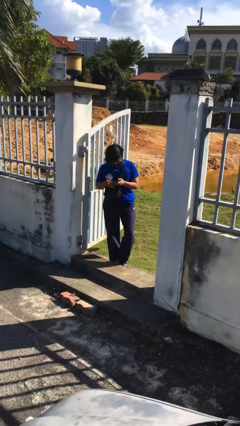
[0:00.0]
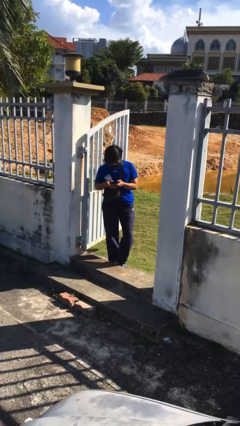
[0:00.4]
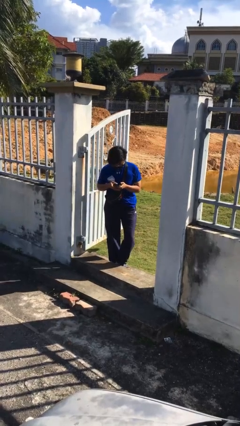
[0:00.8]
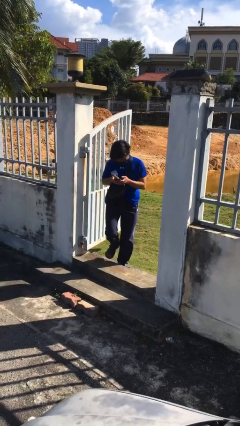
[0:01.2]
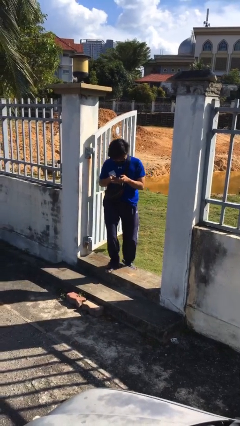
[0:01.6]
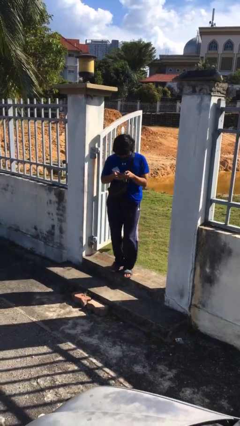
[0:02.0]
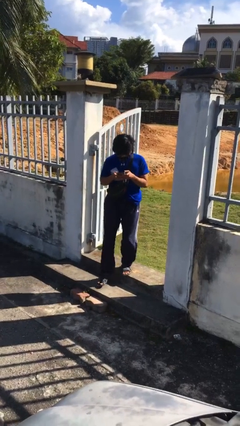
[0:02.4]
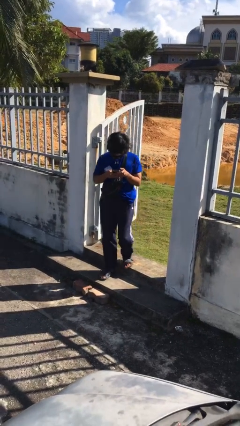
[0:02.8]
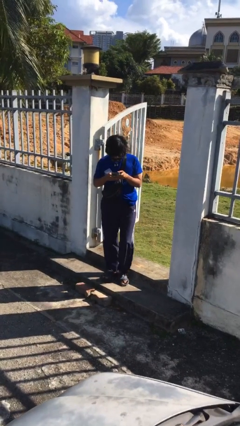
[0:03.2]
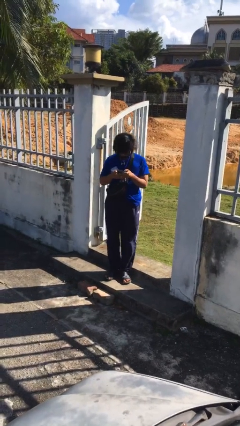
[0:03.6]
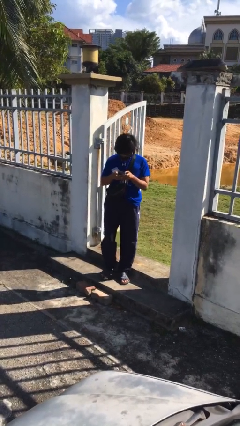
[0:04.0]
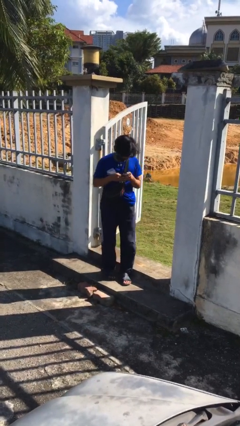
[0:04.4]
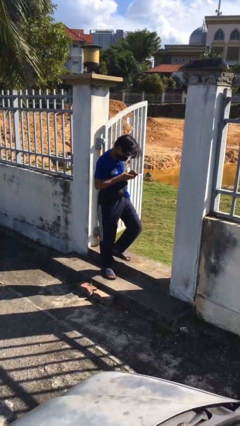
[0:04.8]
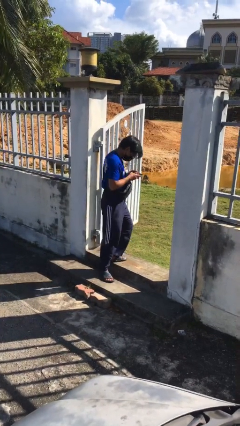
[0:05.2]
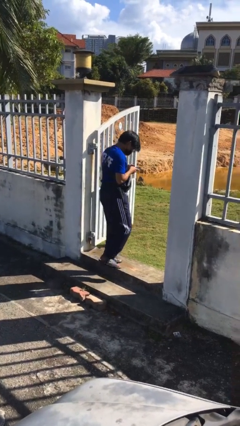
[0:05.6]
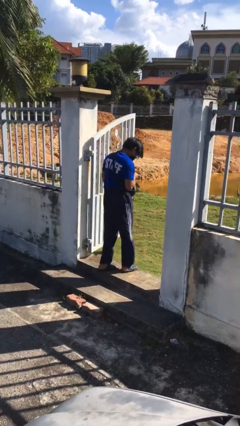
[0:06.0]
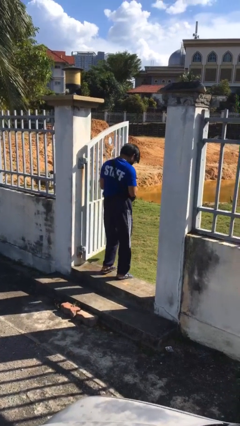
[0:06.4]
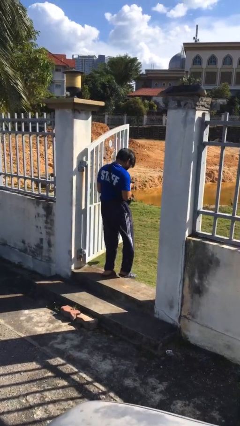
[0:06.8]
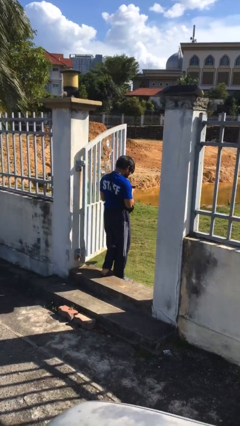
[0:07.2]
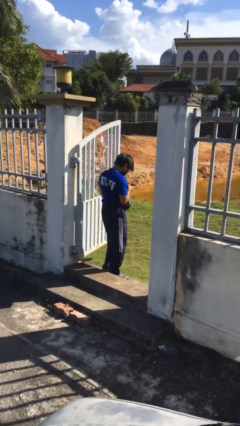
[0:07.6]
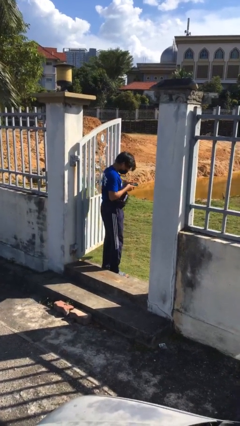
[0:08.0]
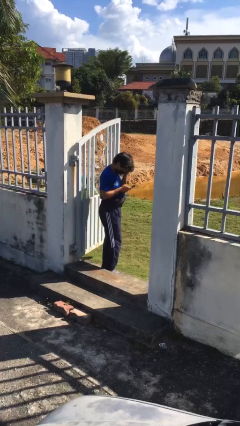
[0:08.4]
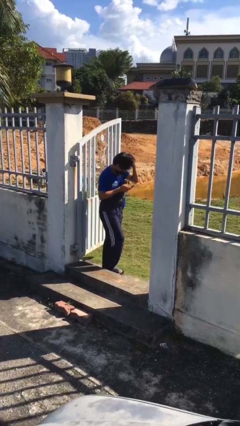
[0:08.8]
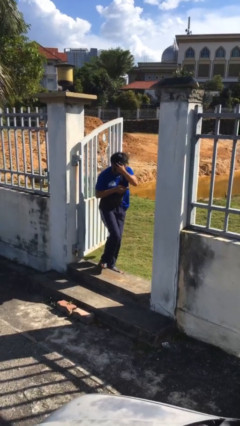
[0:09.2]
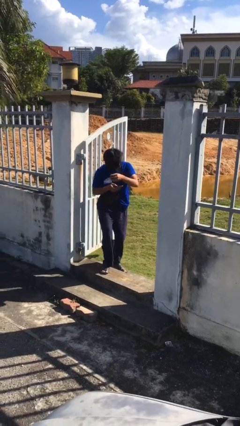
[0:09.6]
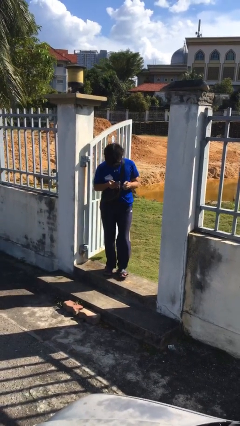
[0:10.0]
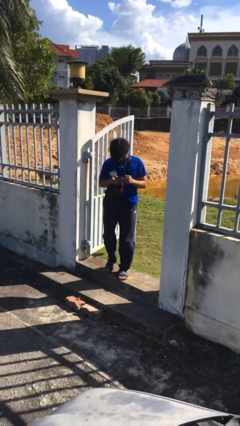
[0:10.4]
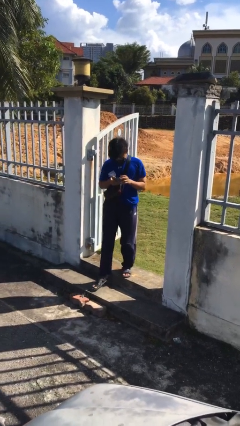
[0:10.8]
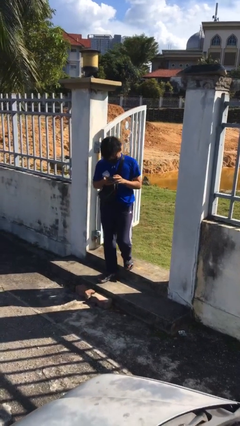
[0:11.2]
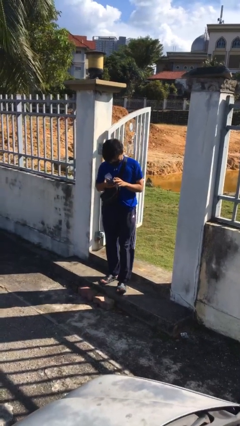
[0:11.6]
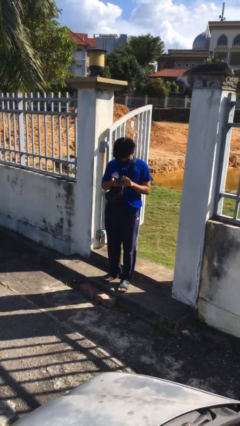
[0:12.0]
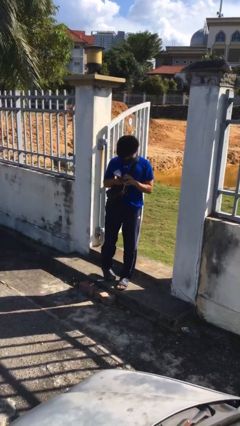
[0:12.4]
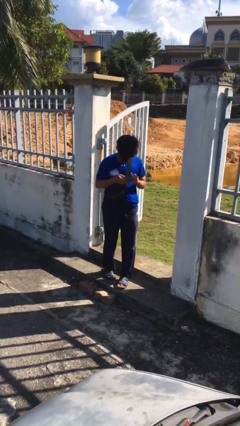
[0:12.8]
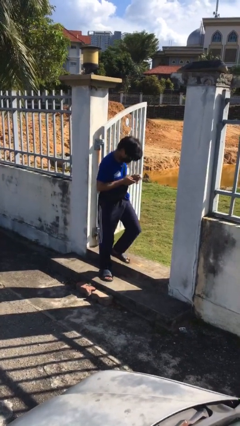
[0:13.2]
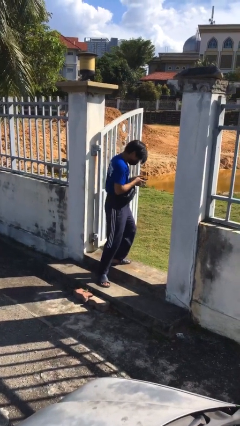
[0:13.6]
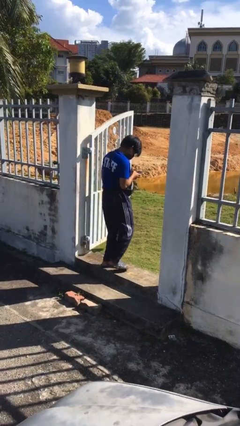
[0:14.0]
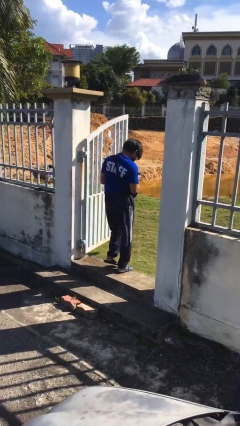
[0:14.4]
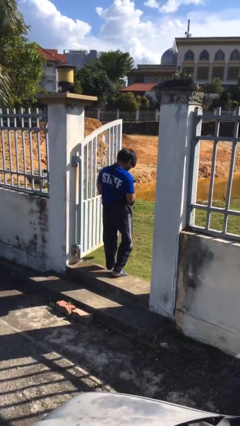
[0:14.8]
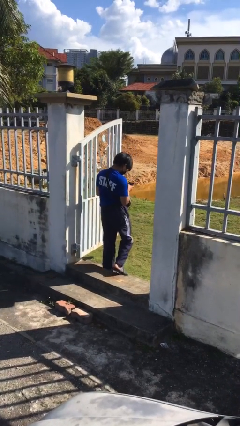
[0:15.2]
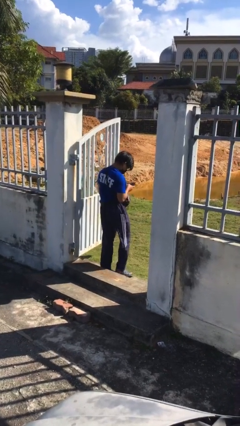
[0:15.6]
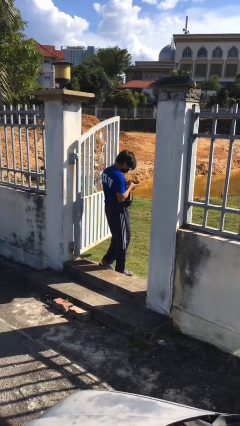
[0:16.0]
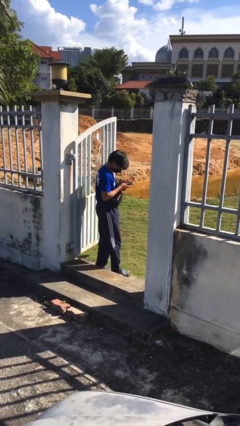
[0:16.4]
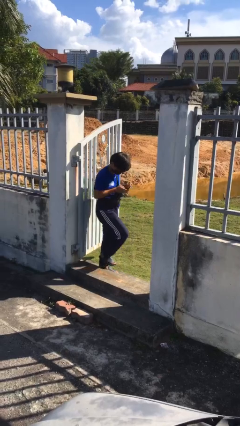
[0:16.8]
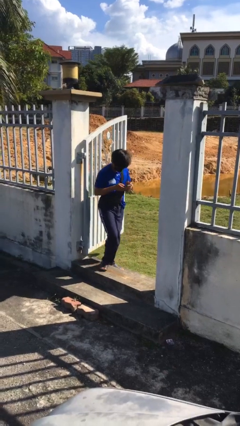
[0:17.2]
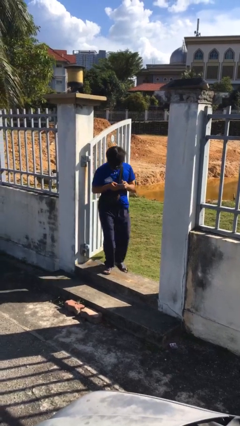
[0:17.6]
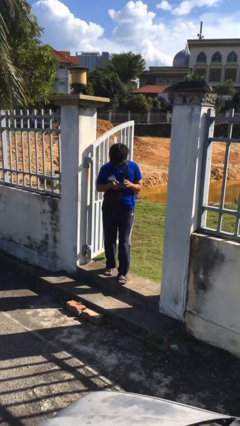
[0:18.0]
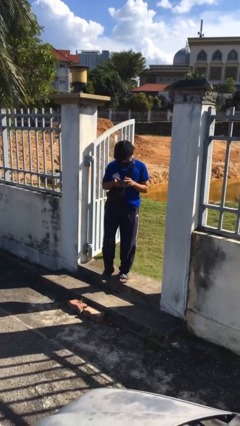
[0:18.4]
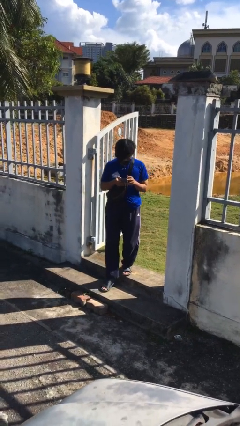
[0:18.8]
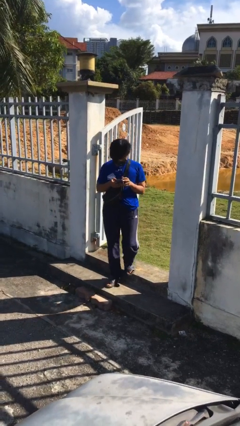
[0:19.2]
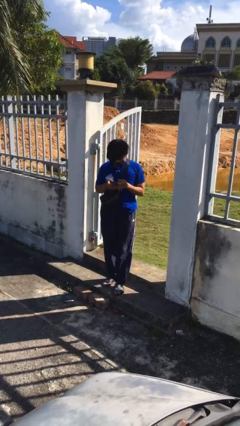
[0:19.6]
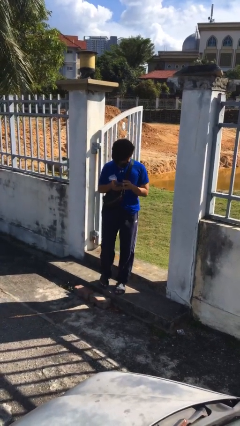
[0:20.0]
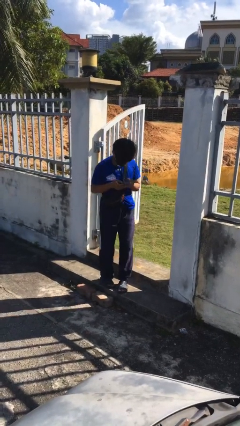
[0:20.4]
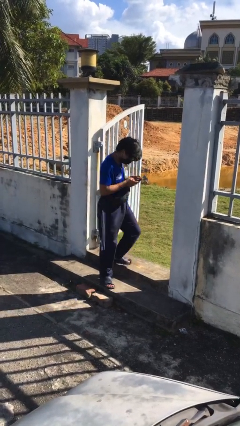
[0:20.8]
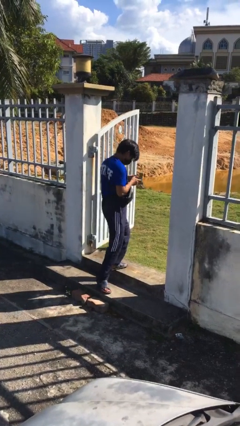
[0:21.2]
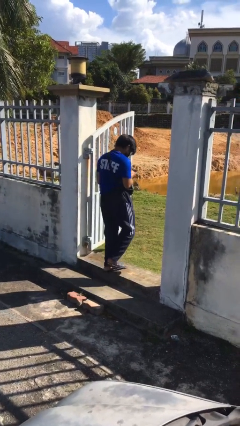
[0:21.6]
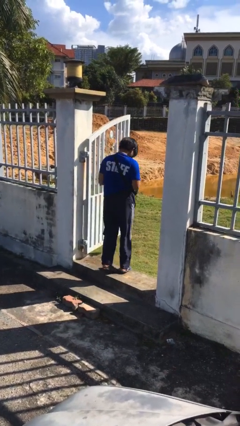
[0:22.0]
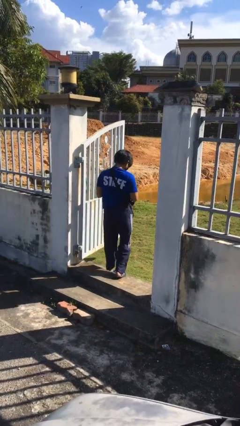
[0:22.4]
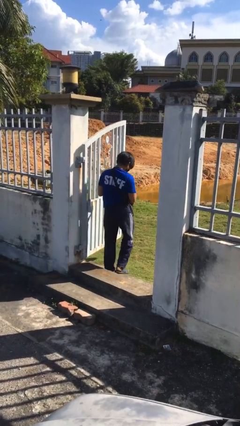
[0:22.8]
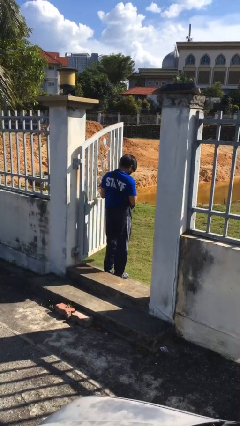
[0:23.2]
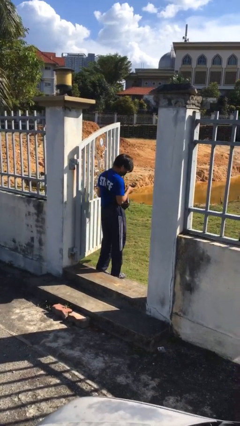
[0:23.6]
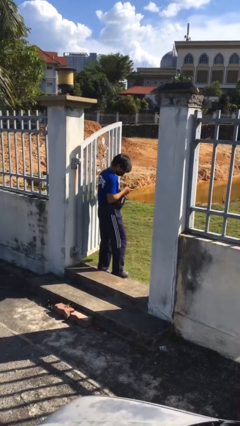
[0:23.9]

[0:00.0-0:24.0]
person texts on phone

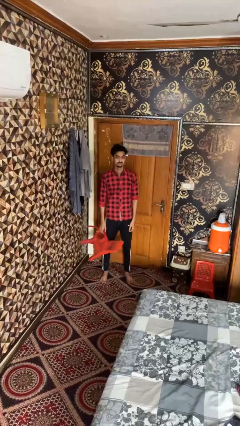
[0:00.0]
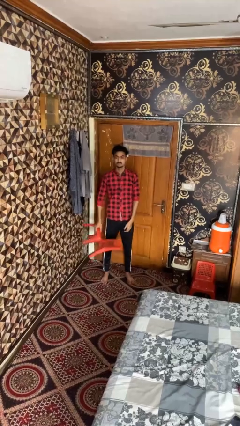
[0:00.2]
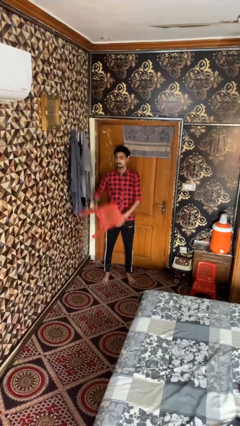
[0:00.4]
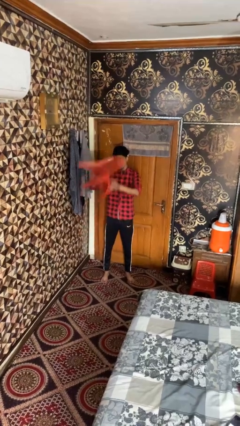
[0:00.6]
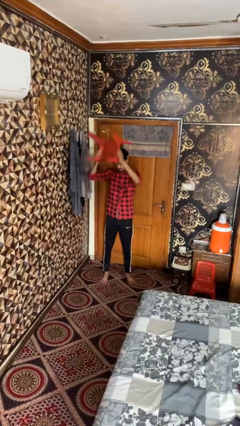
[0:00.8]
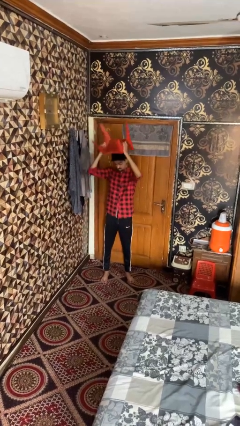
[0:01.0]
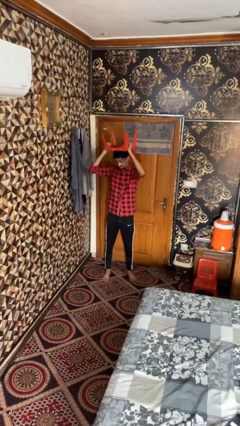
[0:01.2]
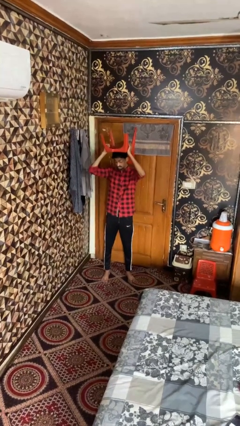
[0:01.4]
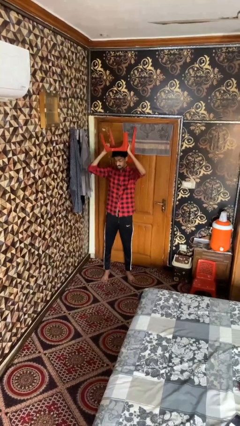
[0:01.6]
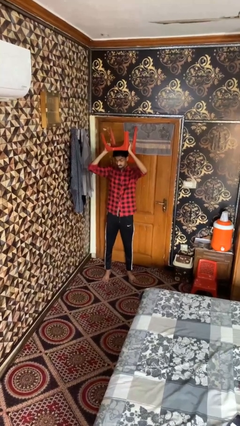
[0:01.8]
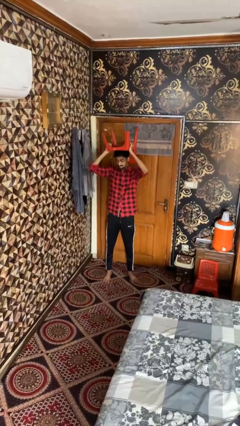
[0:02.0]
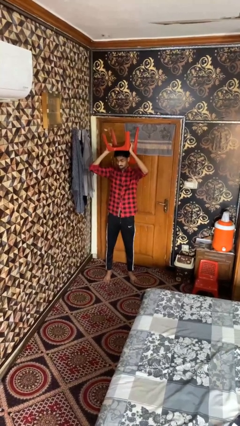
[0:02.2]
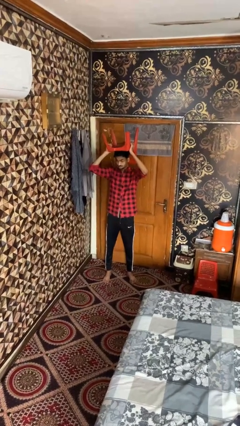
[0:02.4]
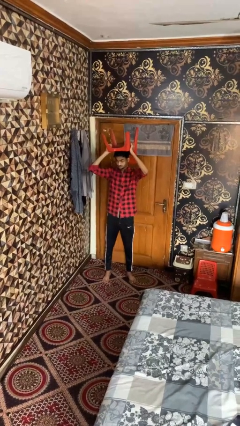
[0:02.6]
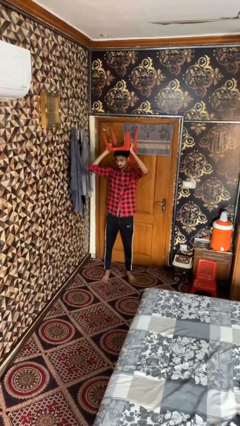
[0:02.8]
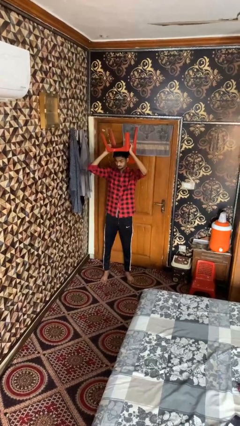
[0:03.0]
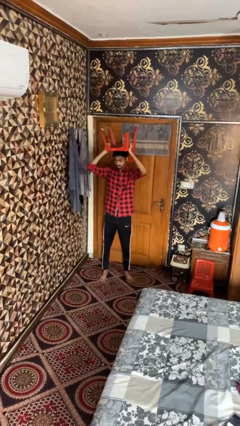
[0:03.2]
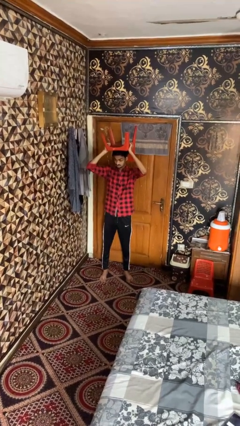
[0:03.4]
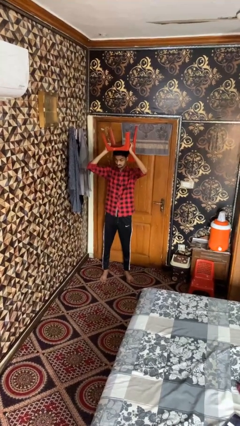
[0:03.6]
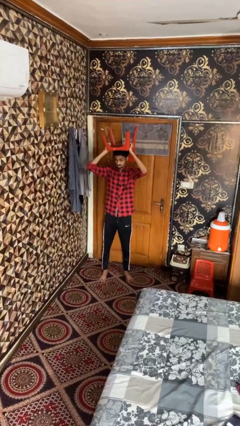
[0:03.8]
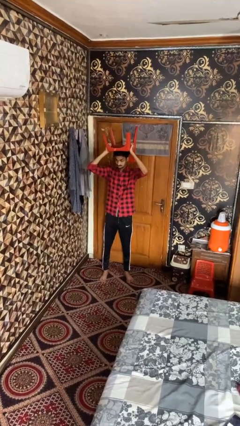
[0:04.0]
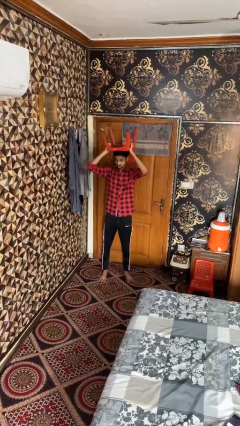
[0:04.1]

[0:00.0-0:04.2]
person holds object above head

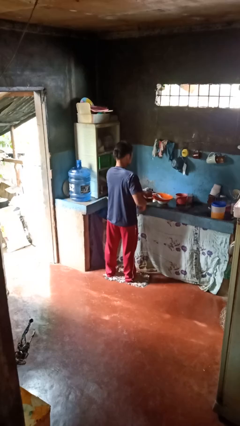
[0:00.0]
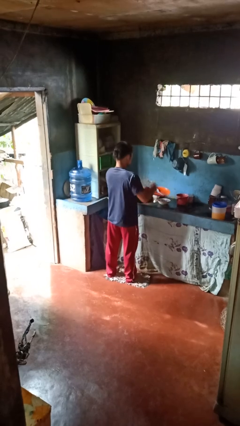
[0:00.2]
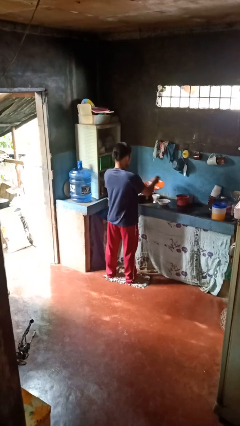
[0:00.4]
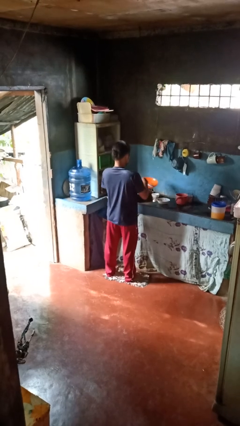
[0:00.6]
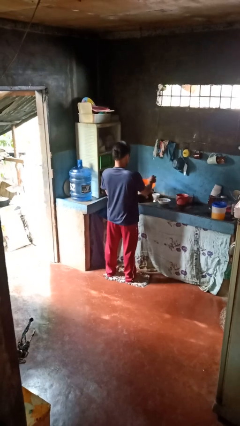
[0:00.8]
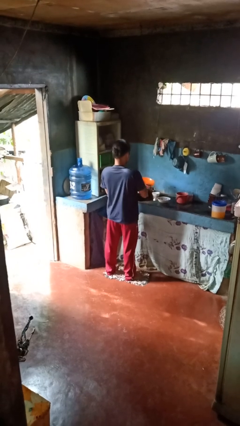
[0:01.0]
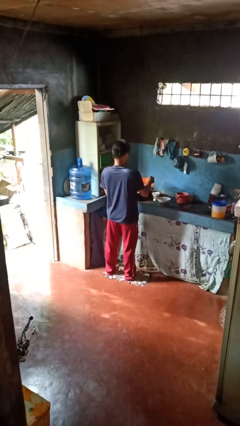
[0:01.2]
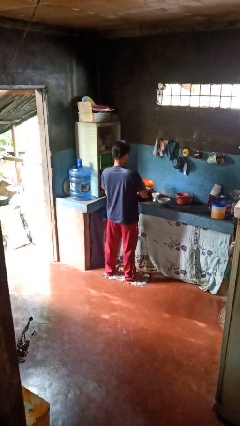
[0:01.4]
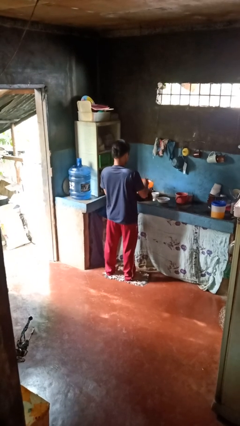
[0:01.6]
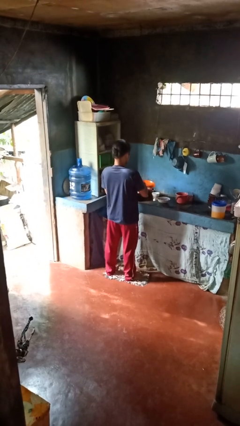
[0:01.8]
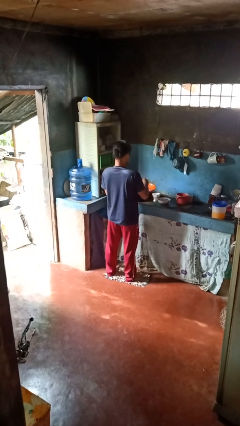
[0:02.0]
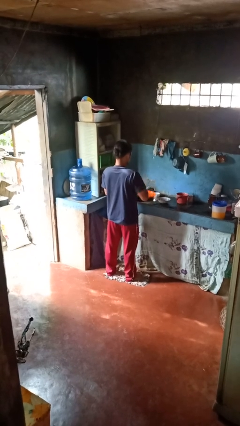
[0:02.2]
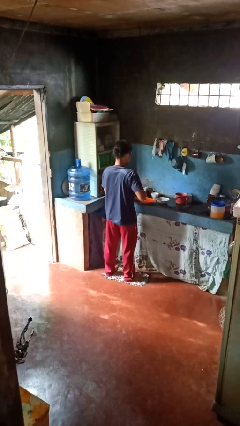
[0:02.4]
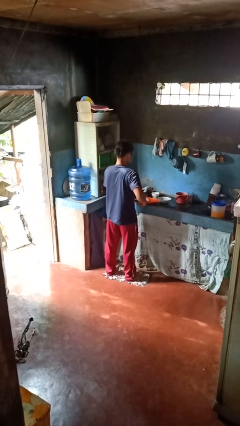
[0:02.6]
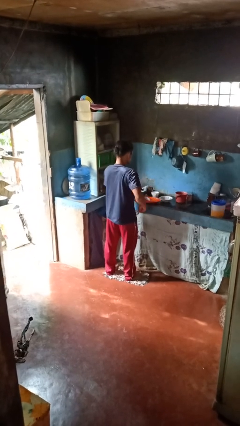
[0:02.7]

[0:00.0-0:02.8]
person washes dish
